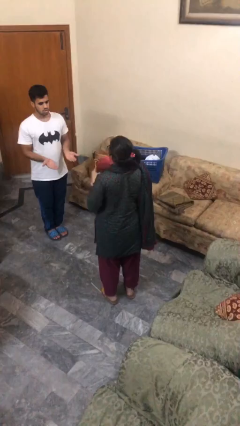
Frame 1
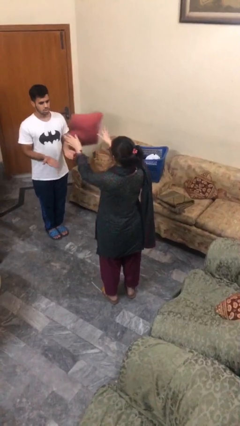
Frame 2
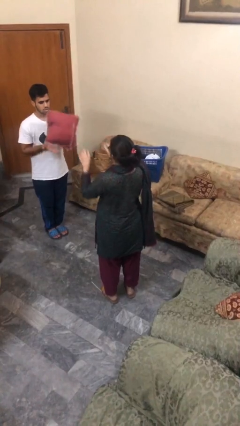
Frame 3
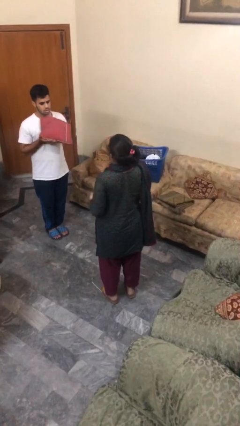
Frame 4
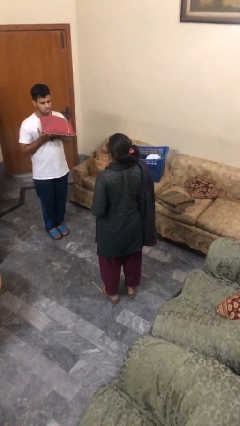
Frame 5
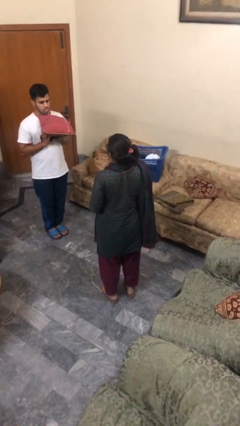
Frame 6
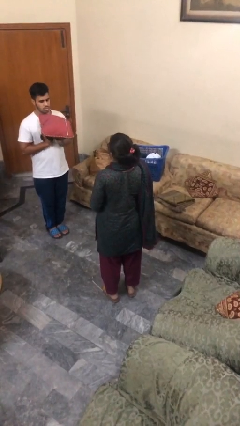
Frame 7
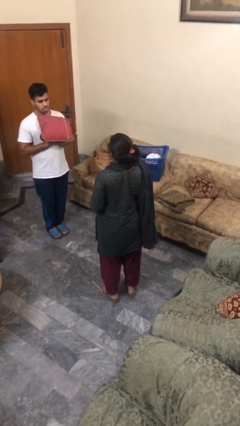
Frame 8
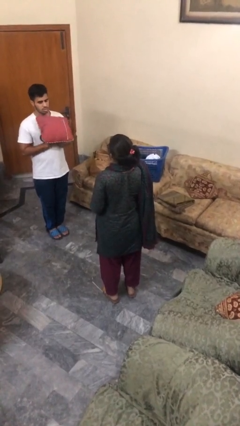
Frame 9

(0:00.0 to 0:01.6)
person throws object to person

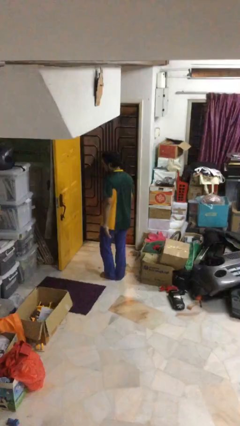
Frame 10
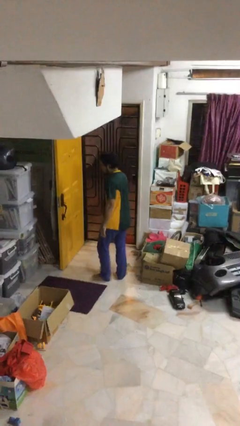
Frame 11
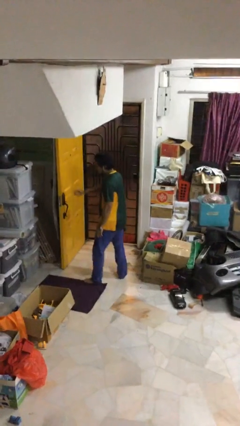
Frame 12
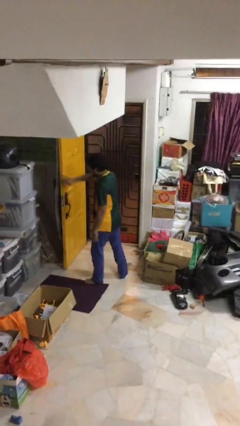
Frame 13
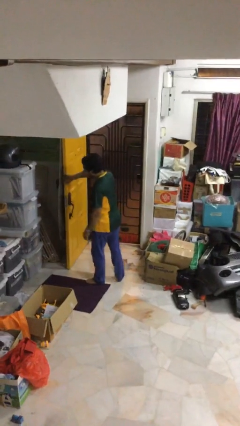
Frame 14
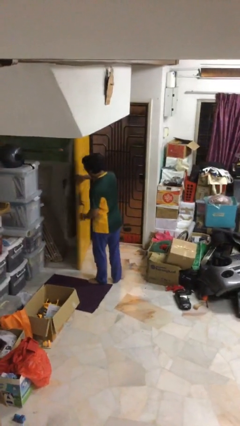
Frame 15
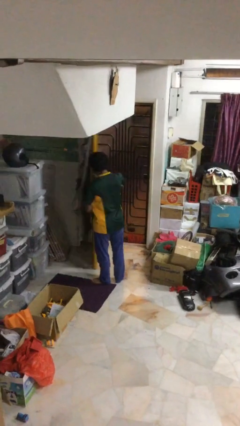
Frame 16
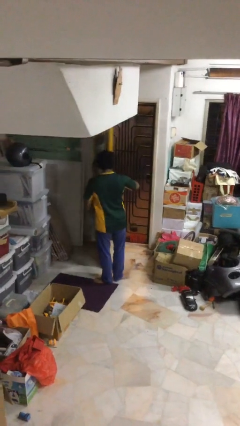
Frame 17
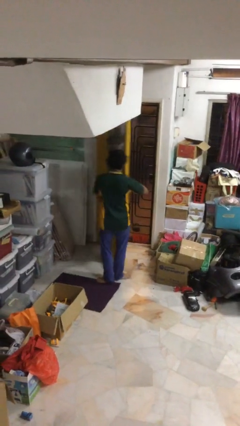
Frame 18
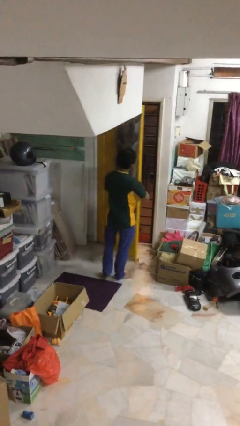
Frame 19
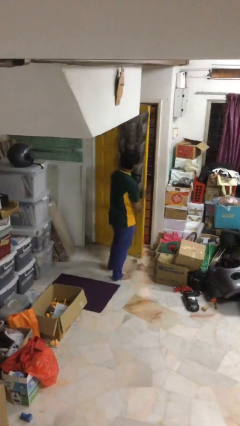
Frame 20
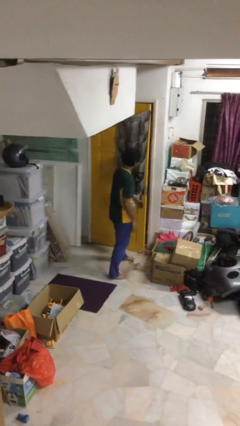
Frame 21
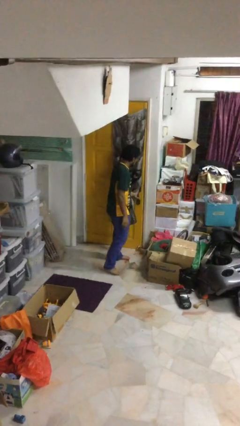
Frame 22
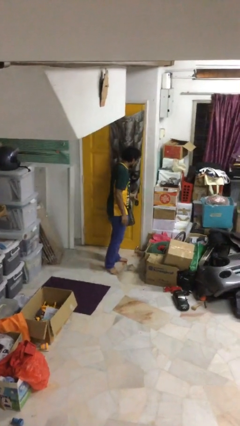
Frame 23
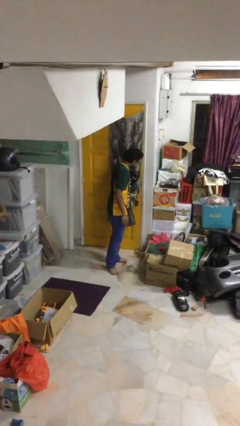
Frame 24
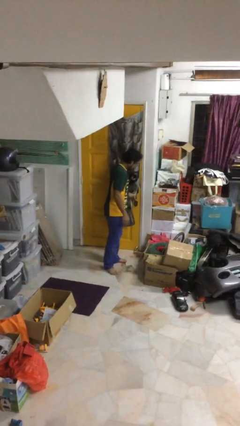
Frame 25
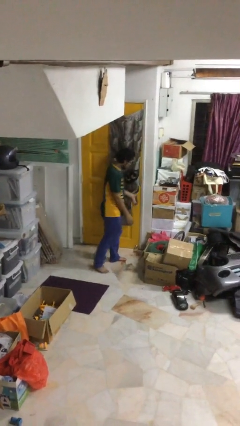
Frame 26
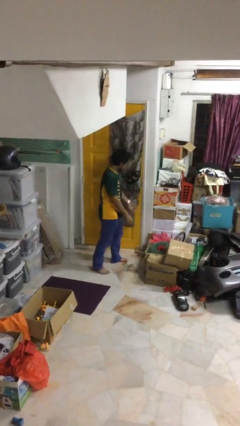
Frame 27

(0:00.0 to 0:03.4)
person closes facility door

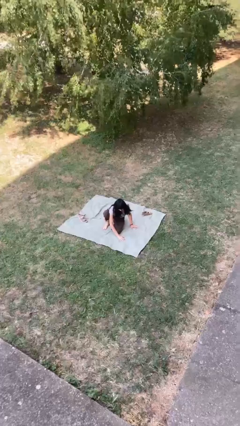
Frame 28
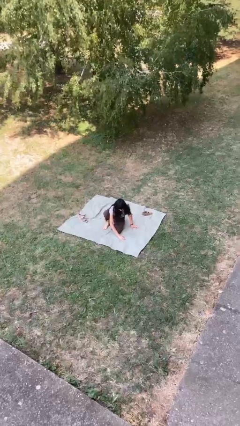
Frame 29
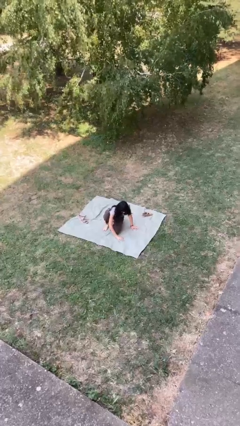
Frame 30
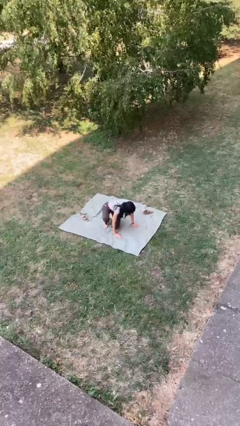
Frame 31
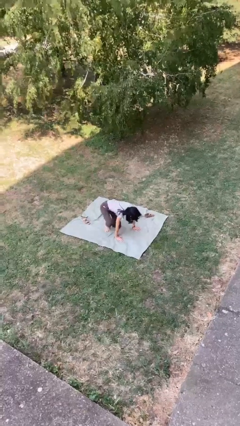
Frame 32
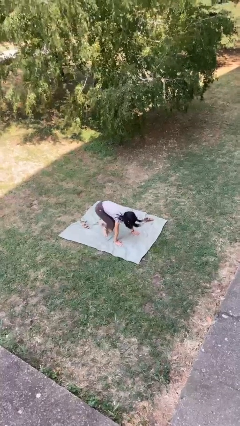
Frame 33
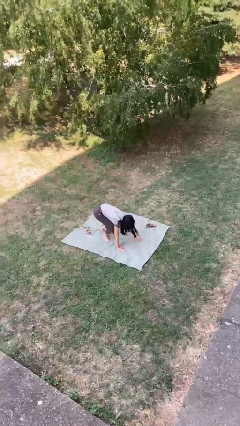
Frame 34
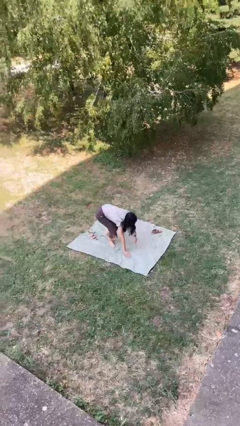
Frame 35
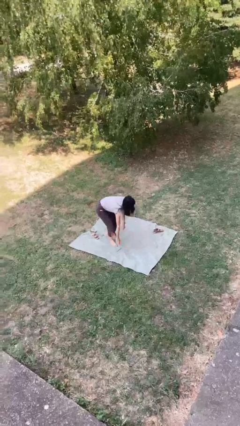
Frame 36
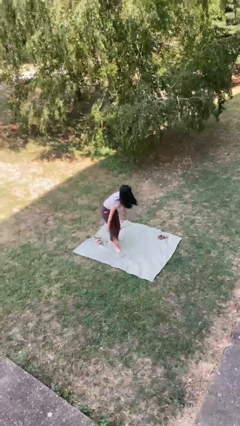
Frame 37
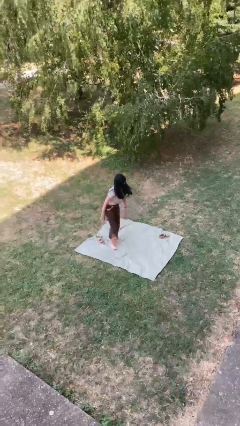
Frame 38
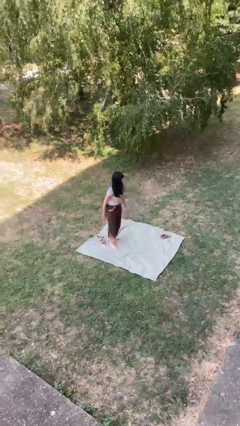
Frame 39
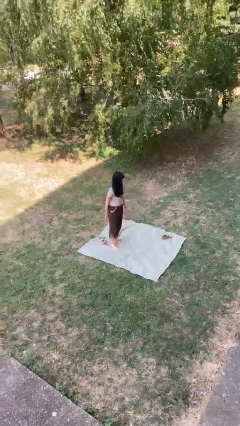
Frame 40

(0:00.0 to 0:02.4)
person stands up from floor

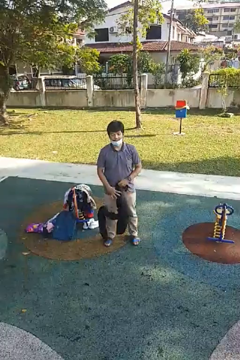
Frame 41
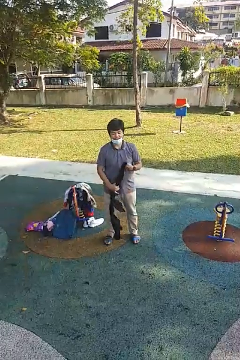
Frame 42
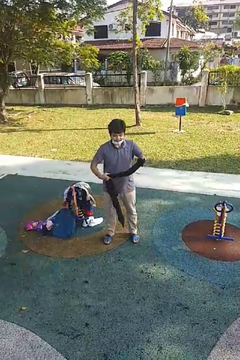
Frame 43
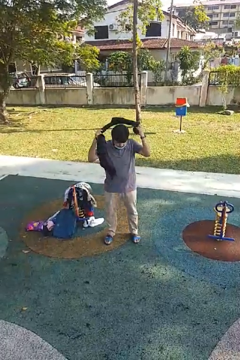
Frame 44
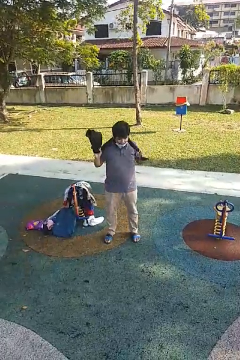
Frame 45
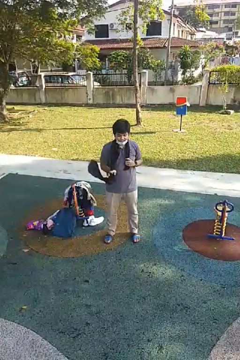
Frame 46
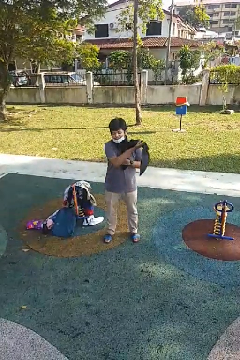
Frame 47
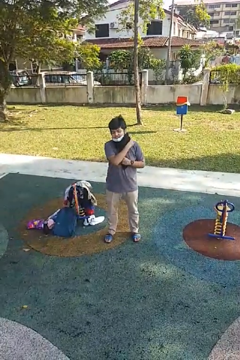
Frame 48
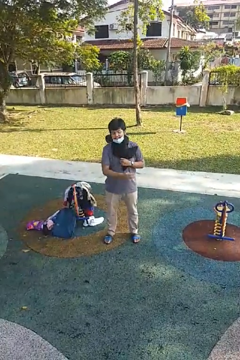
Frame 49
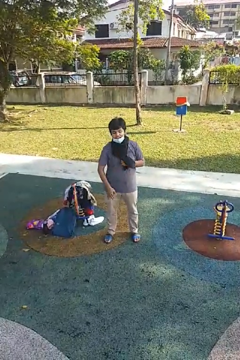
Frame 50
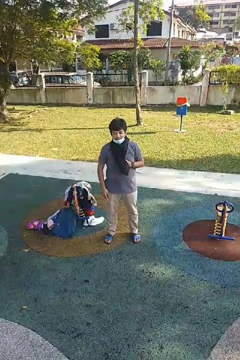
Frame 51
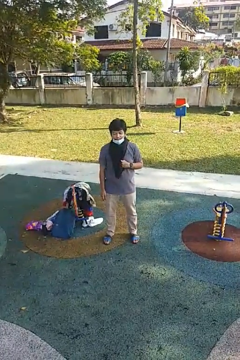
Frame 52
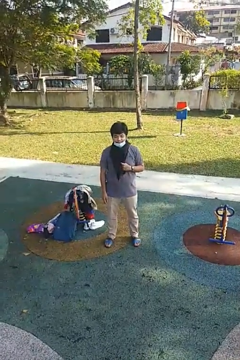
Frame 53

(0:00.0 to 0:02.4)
person puts on scarf

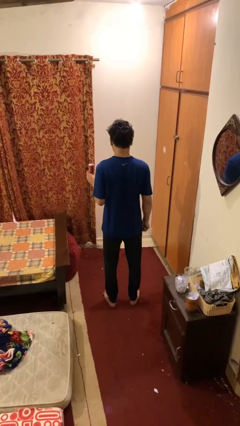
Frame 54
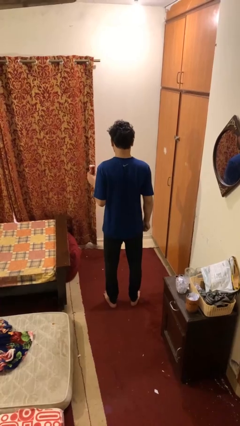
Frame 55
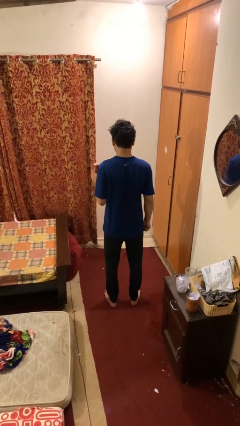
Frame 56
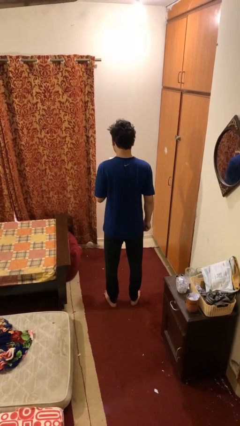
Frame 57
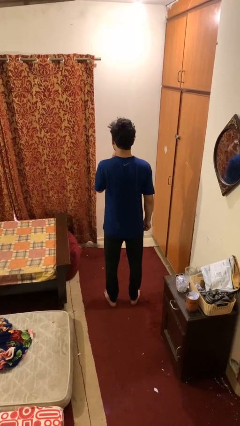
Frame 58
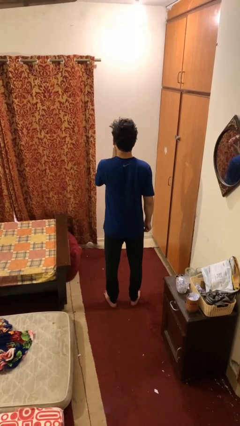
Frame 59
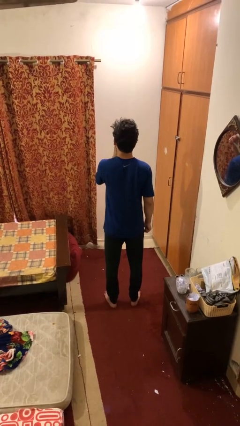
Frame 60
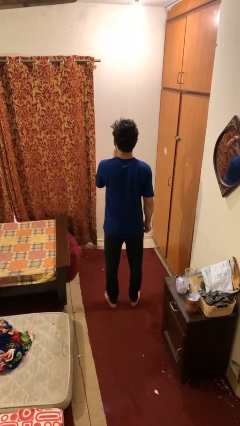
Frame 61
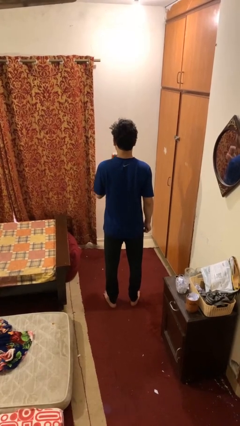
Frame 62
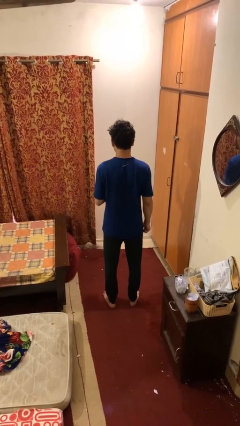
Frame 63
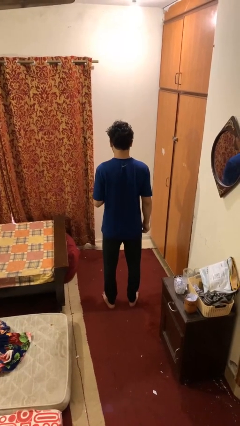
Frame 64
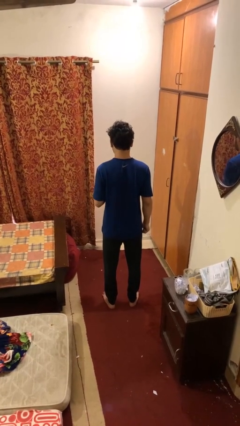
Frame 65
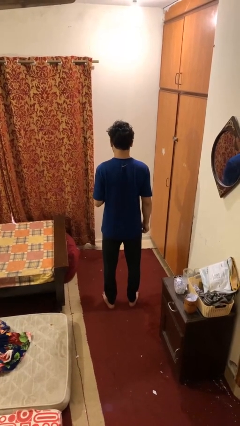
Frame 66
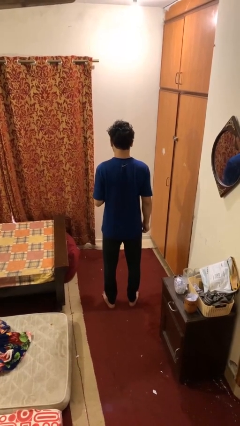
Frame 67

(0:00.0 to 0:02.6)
person drinks from beverage can

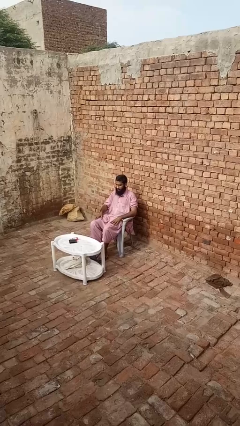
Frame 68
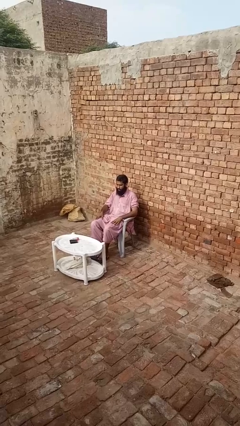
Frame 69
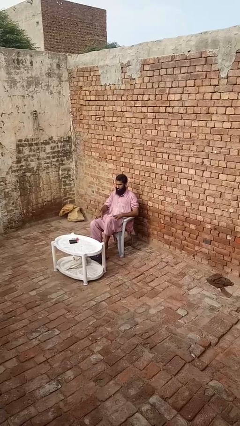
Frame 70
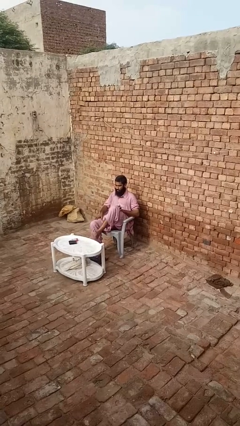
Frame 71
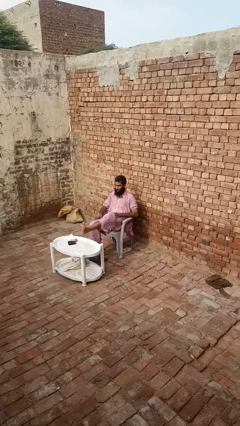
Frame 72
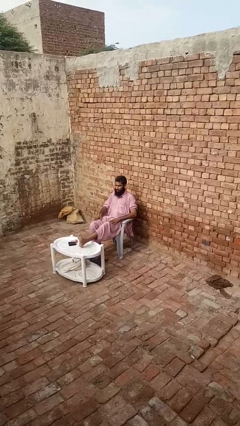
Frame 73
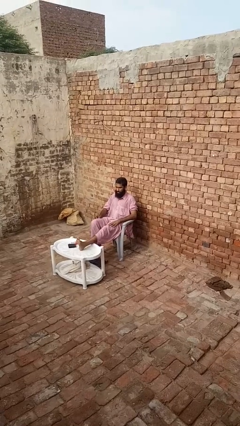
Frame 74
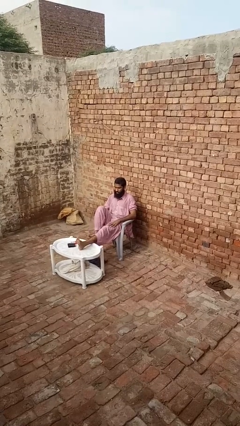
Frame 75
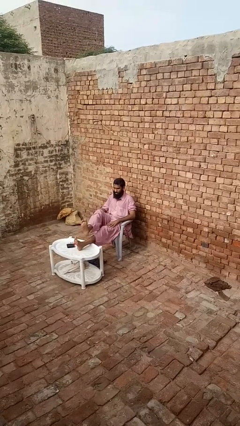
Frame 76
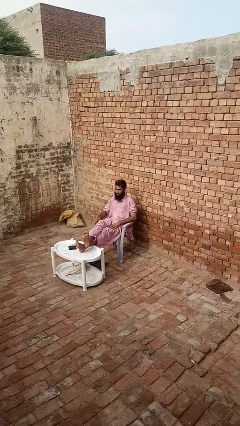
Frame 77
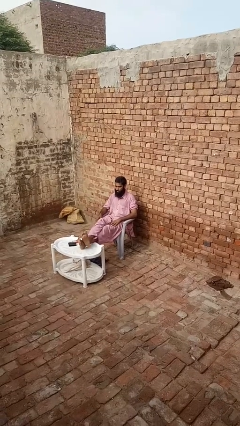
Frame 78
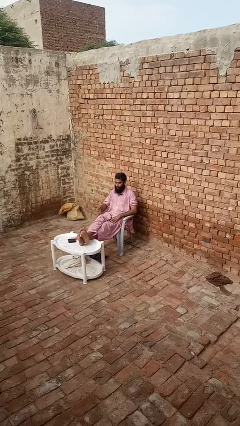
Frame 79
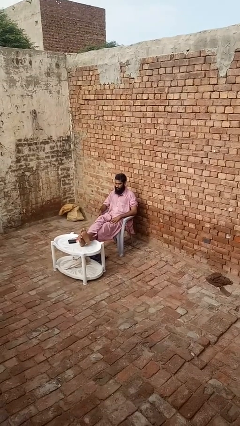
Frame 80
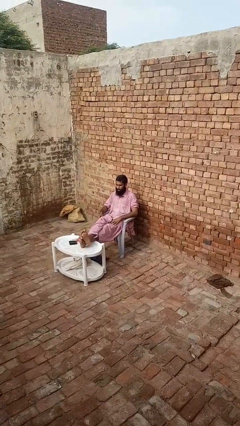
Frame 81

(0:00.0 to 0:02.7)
person puts feet up

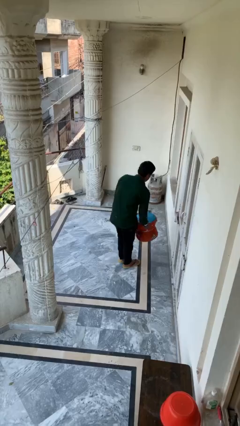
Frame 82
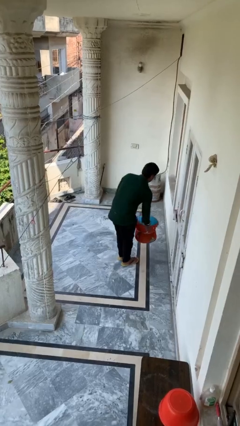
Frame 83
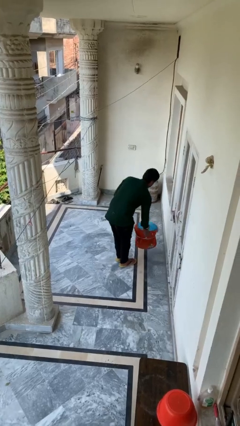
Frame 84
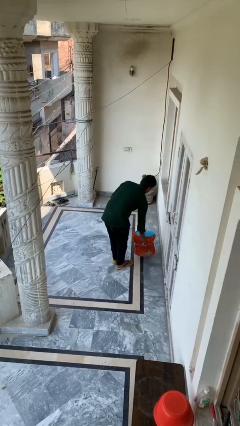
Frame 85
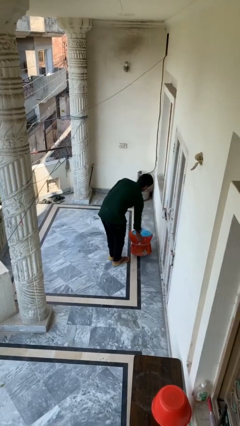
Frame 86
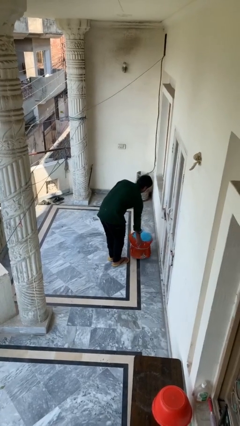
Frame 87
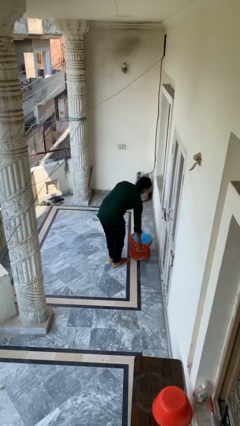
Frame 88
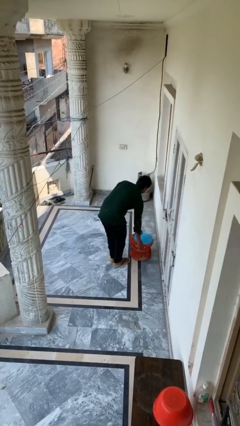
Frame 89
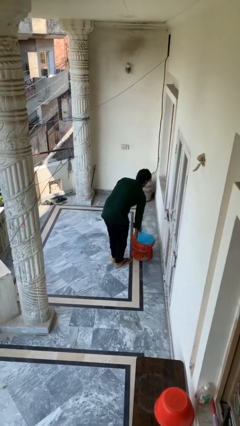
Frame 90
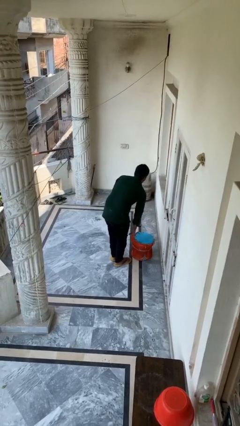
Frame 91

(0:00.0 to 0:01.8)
person puts down object on floor

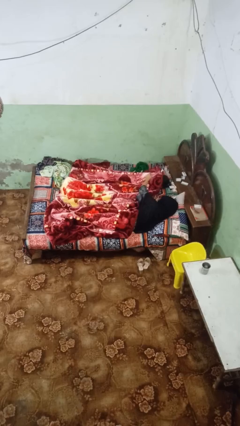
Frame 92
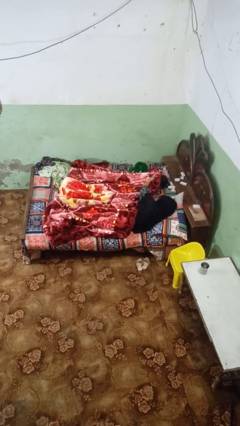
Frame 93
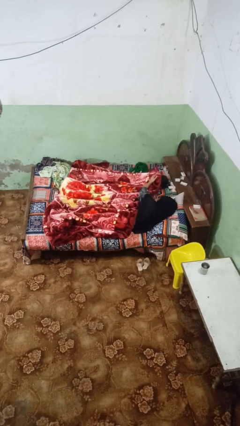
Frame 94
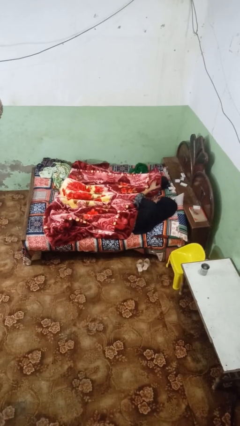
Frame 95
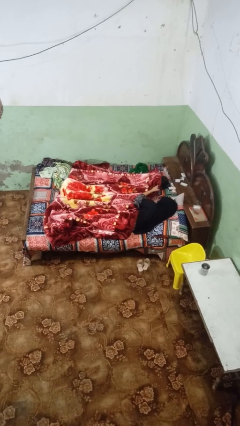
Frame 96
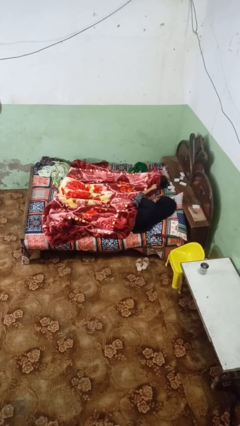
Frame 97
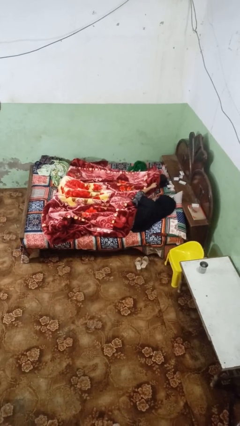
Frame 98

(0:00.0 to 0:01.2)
person covers friend with blanket
